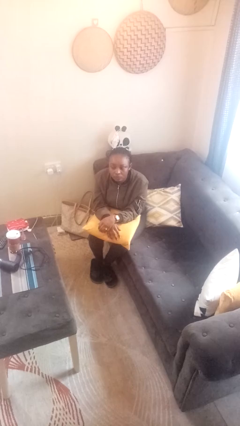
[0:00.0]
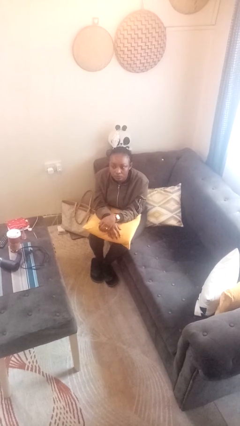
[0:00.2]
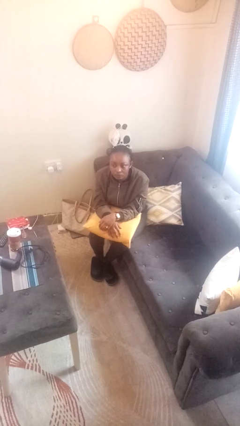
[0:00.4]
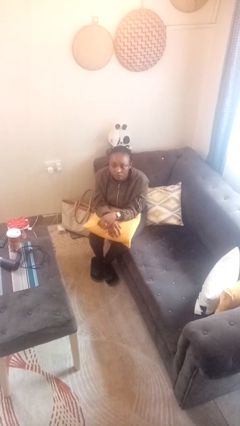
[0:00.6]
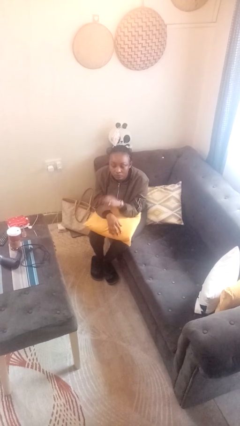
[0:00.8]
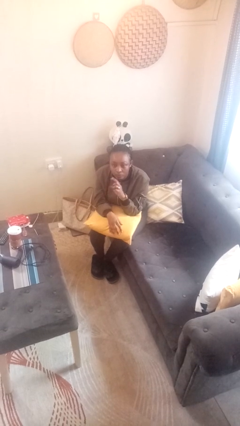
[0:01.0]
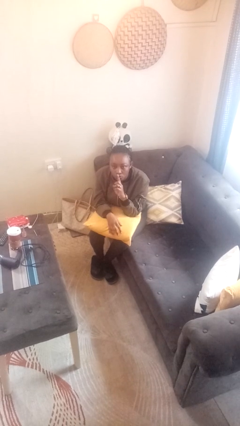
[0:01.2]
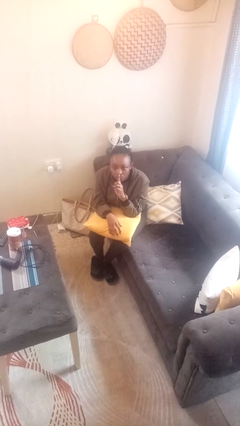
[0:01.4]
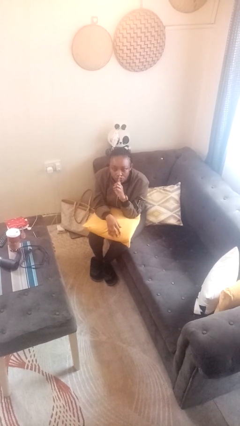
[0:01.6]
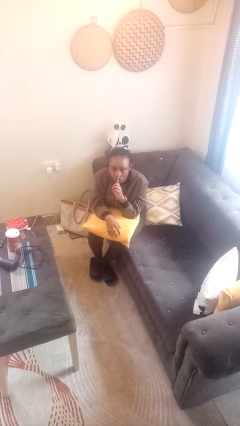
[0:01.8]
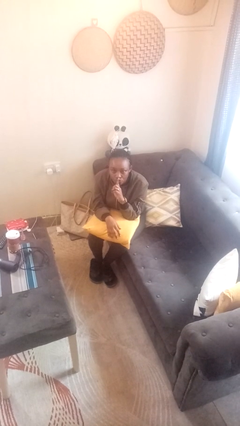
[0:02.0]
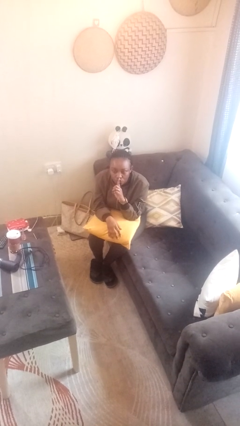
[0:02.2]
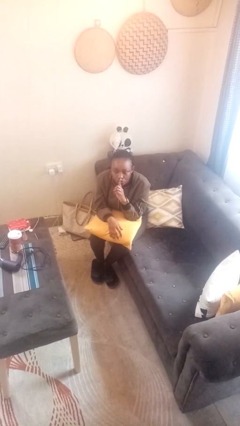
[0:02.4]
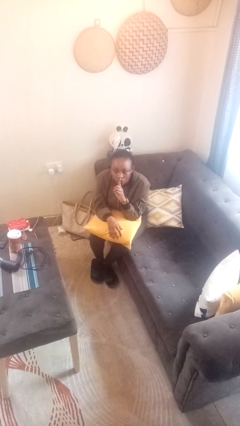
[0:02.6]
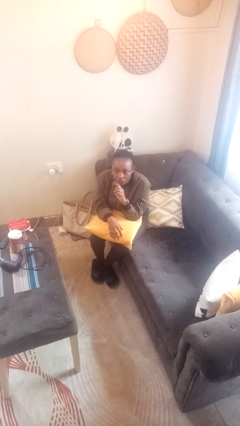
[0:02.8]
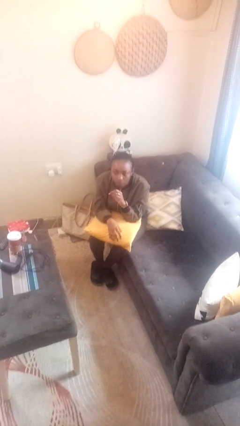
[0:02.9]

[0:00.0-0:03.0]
person gestures be quiet

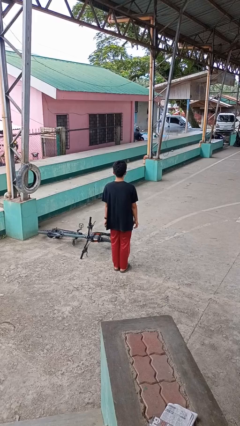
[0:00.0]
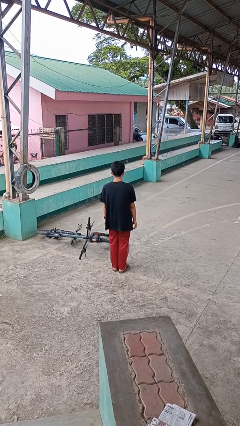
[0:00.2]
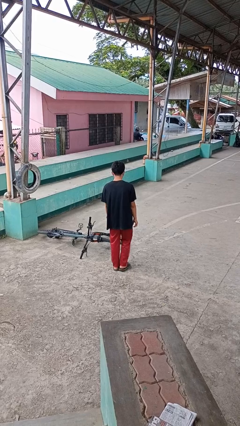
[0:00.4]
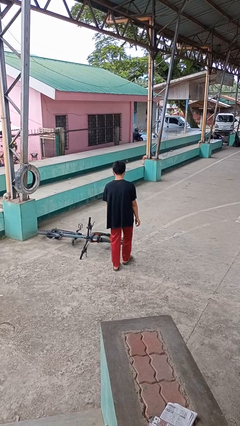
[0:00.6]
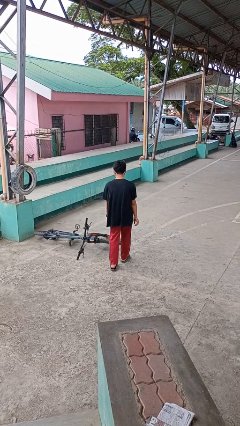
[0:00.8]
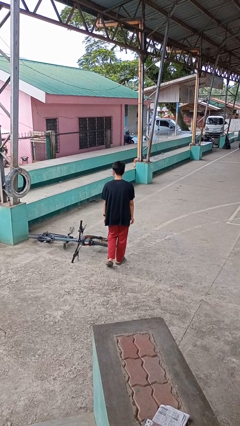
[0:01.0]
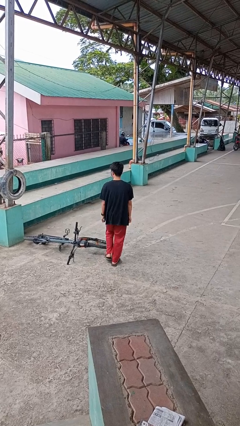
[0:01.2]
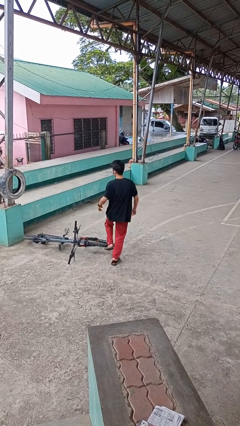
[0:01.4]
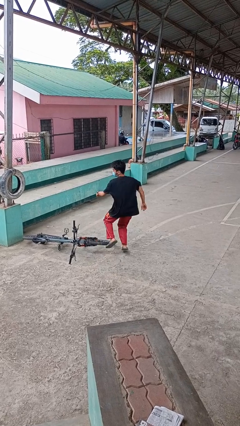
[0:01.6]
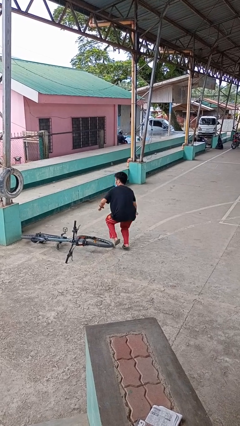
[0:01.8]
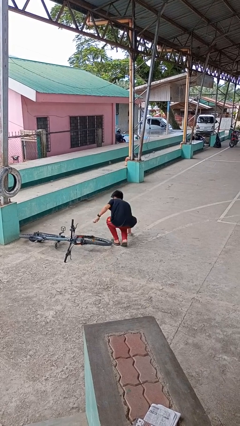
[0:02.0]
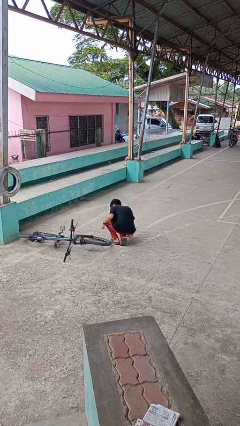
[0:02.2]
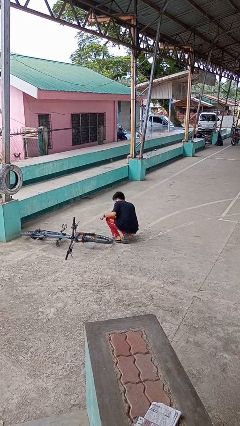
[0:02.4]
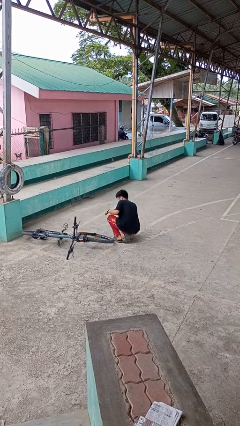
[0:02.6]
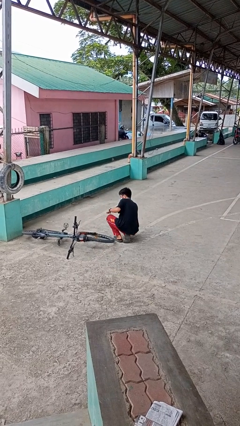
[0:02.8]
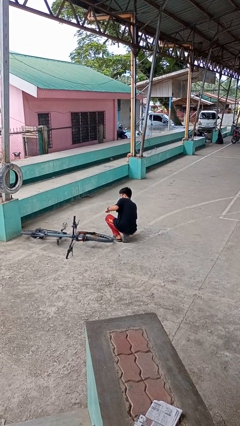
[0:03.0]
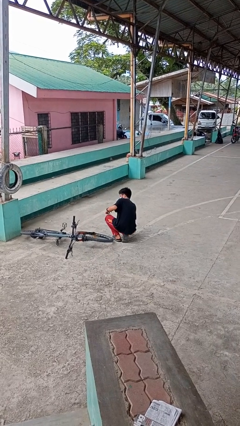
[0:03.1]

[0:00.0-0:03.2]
person trips on object on floor

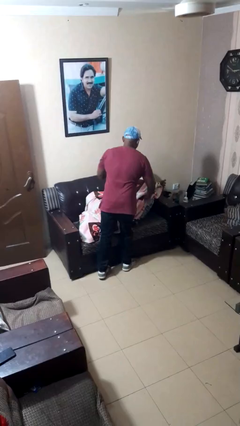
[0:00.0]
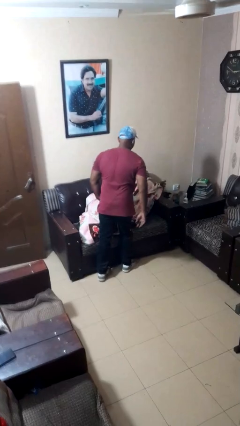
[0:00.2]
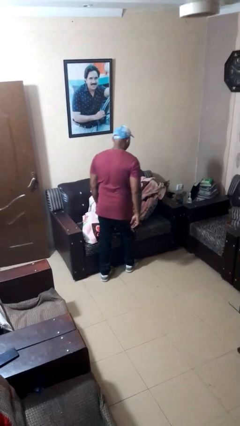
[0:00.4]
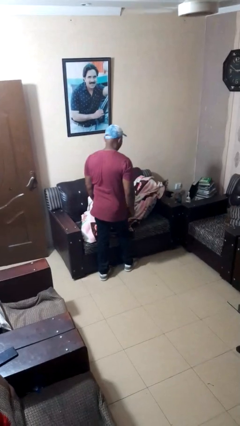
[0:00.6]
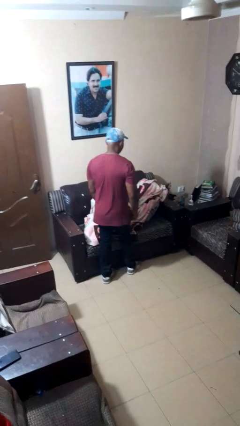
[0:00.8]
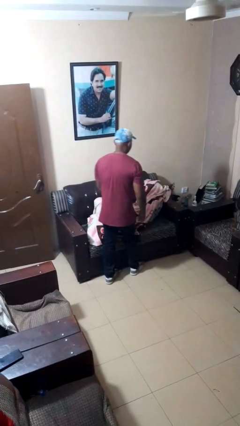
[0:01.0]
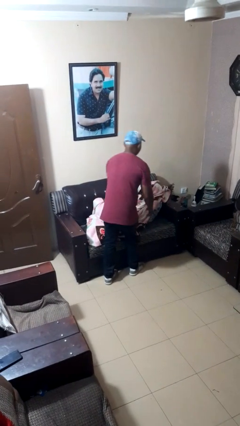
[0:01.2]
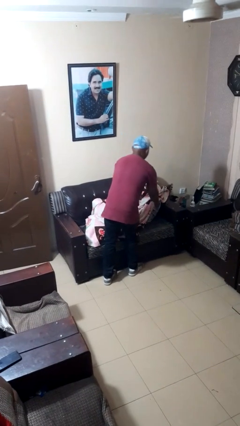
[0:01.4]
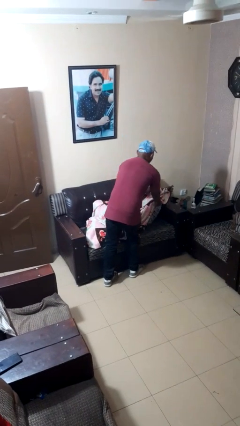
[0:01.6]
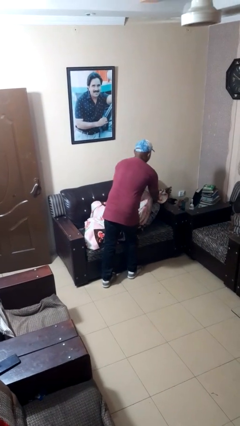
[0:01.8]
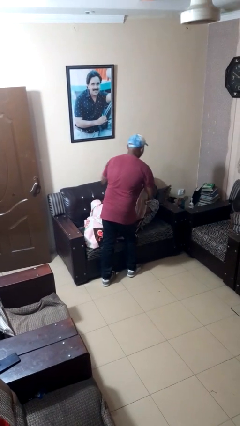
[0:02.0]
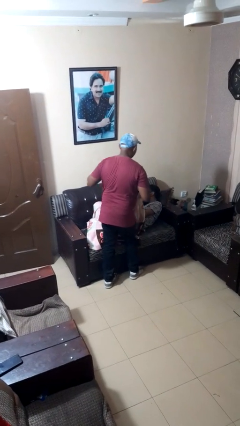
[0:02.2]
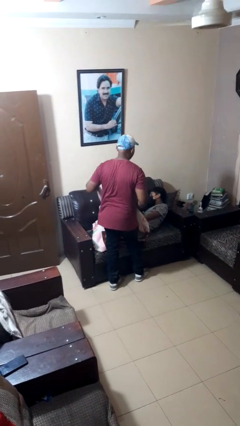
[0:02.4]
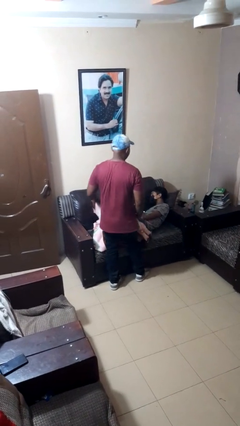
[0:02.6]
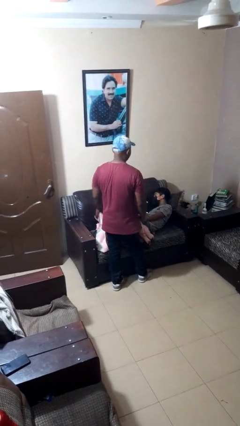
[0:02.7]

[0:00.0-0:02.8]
person uncovers friend with blanket

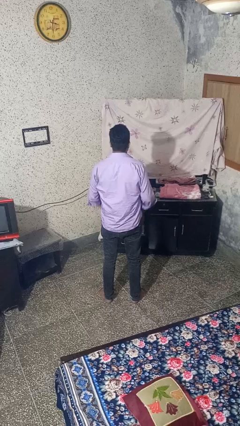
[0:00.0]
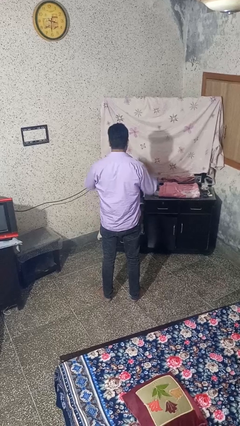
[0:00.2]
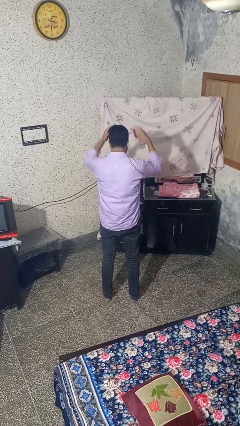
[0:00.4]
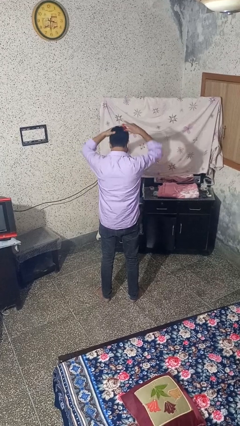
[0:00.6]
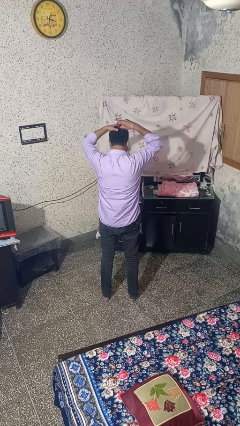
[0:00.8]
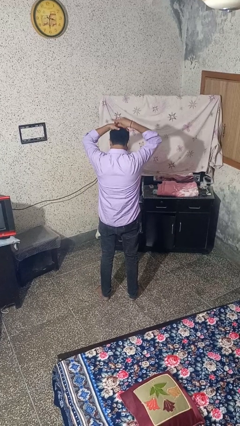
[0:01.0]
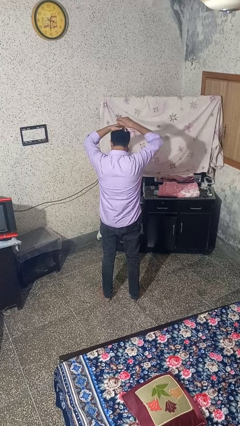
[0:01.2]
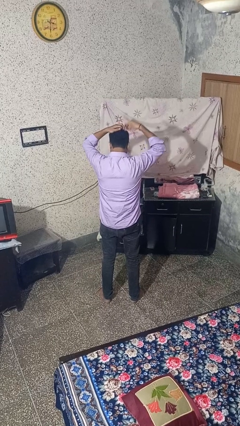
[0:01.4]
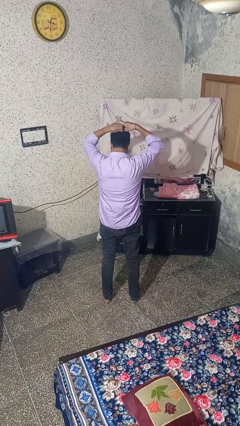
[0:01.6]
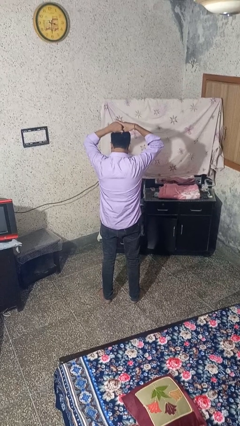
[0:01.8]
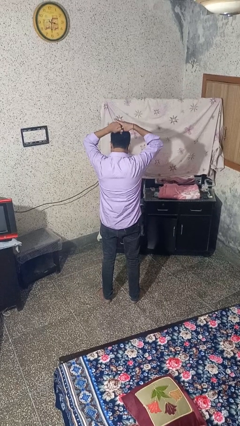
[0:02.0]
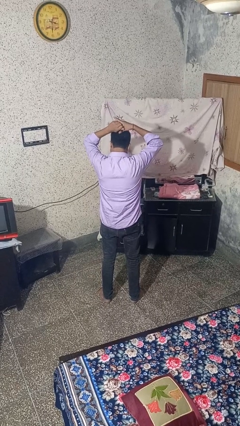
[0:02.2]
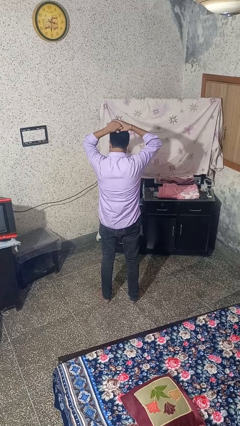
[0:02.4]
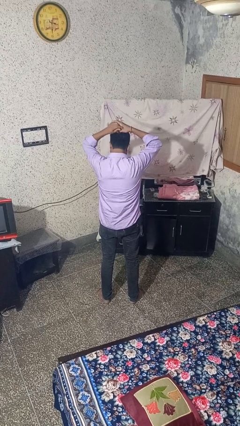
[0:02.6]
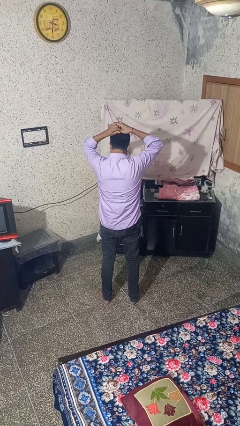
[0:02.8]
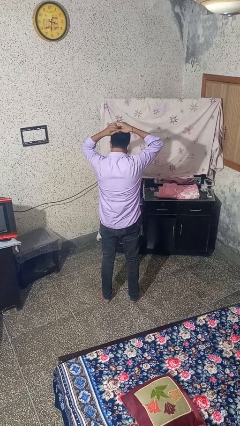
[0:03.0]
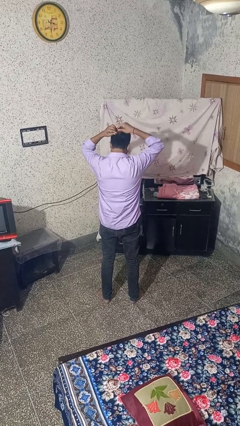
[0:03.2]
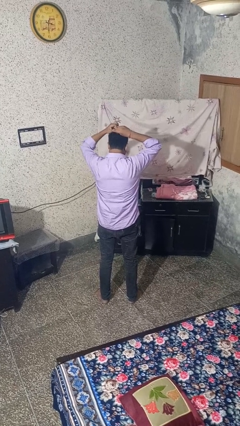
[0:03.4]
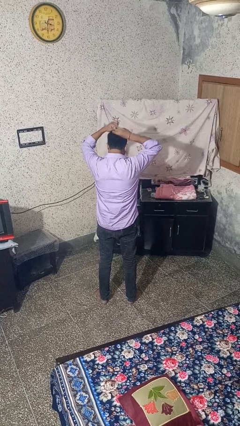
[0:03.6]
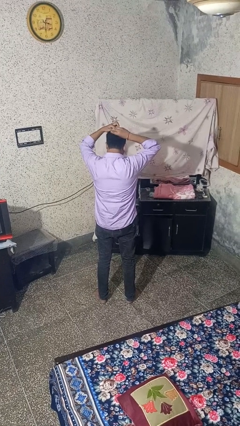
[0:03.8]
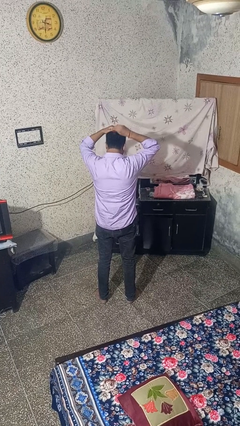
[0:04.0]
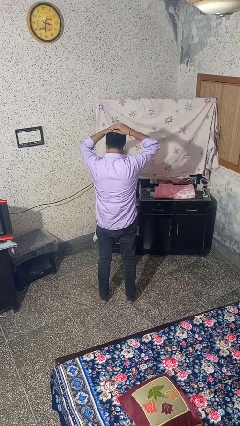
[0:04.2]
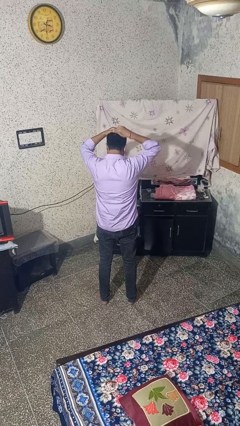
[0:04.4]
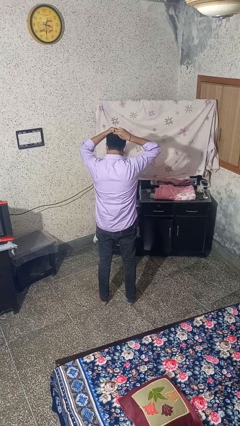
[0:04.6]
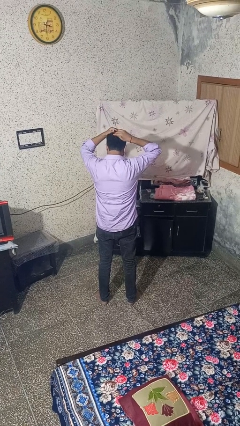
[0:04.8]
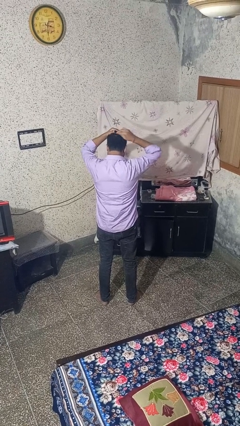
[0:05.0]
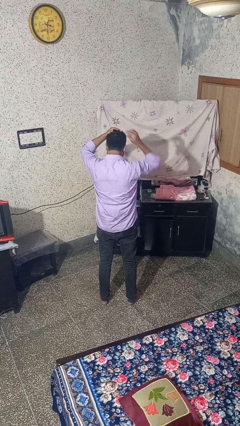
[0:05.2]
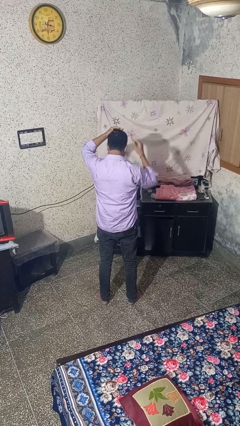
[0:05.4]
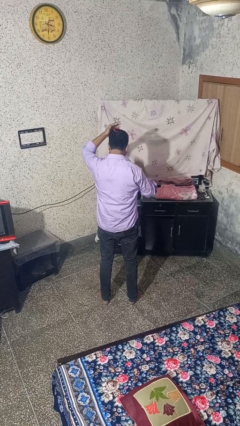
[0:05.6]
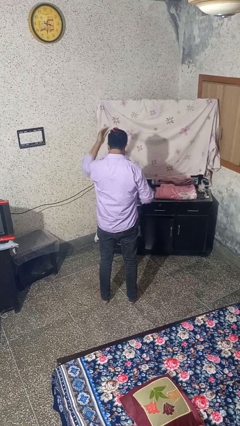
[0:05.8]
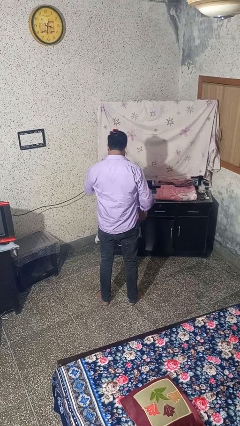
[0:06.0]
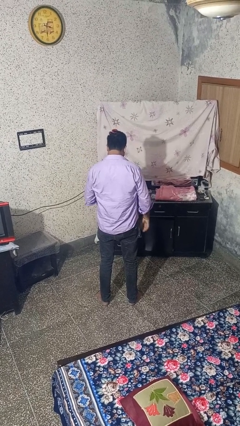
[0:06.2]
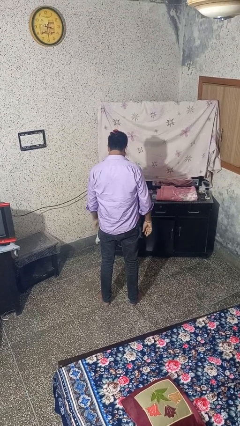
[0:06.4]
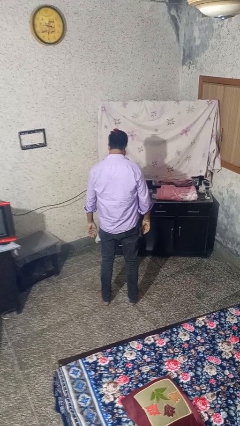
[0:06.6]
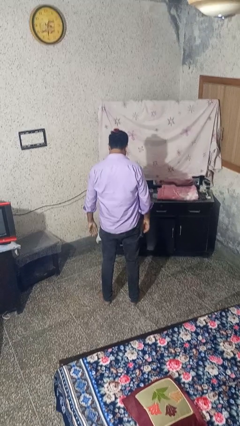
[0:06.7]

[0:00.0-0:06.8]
person puts hair in ponytail

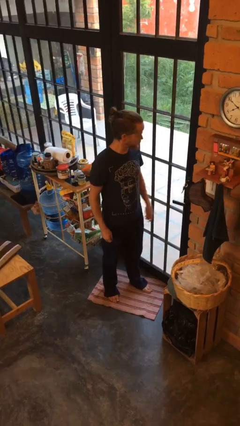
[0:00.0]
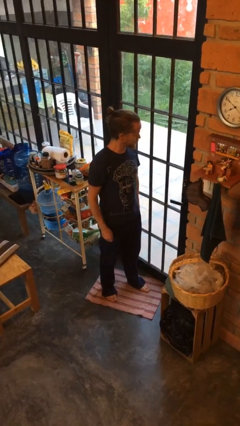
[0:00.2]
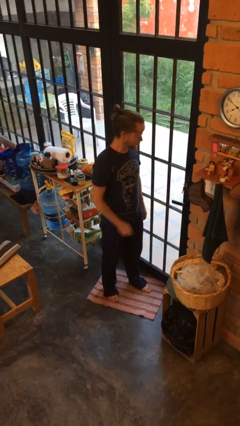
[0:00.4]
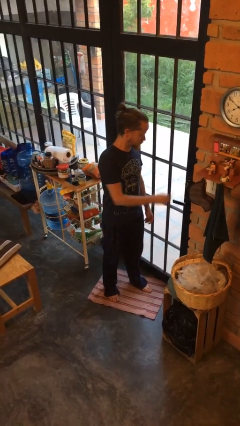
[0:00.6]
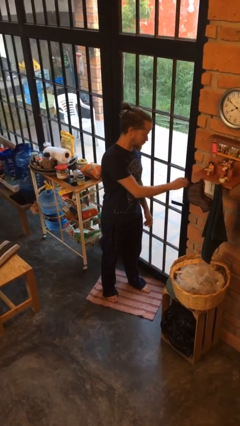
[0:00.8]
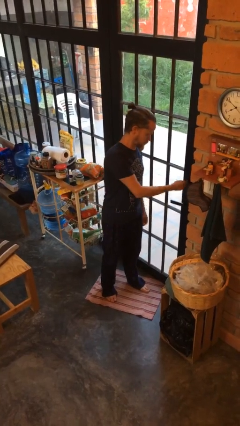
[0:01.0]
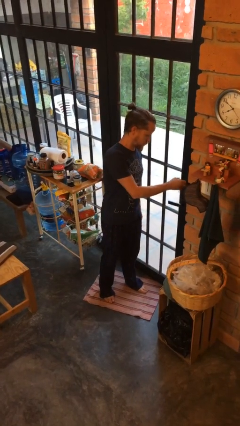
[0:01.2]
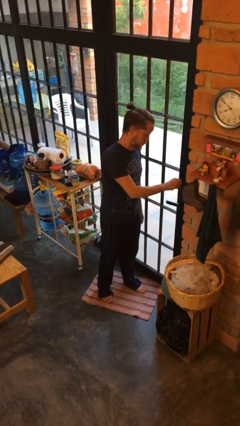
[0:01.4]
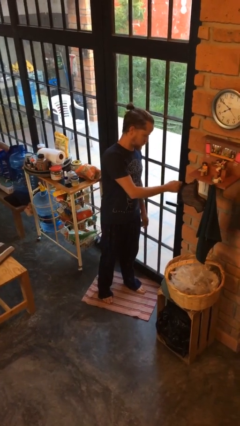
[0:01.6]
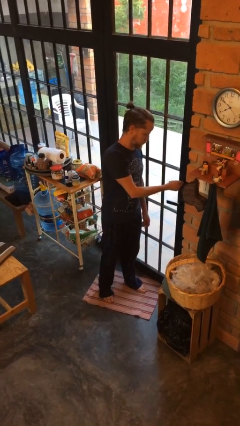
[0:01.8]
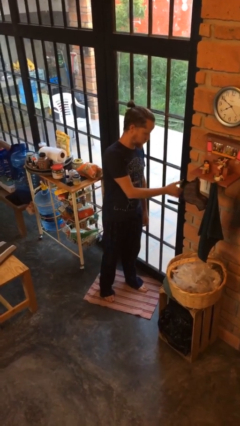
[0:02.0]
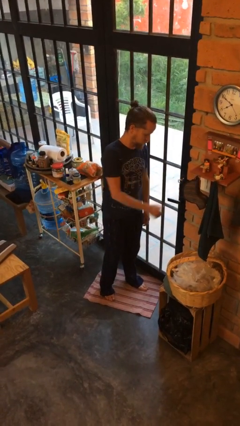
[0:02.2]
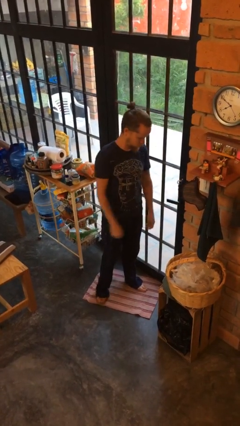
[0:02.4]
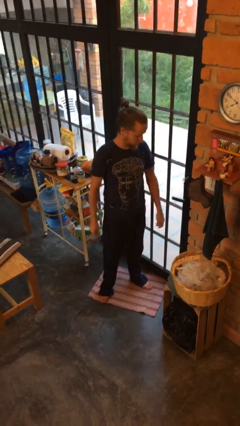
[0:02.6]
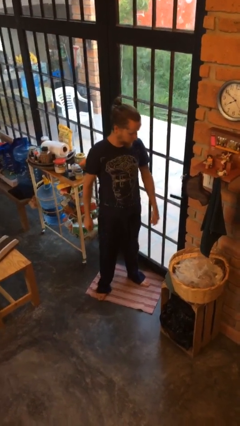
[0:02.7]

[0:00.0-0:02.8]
person locks door with keys
